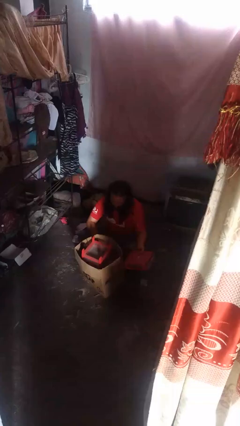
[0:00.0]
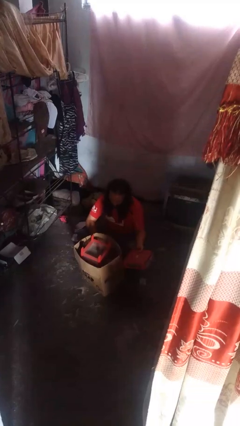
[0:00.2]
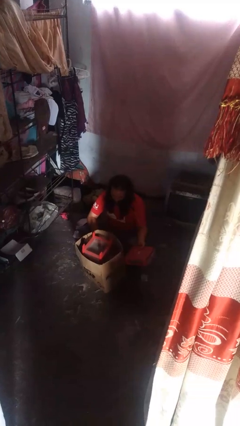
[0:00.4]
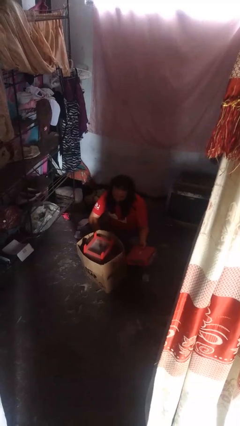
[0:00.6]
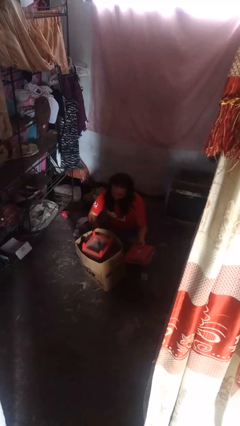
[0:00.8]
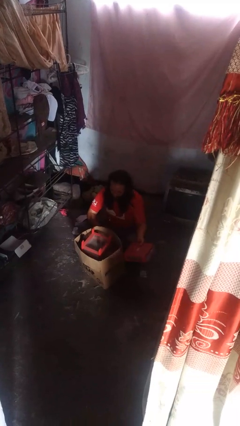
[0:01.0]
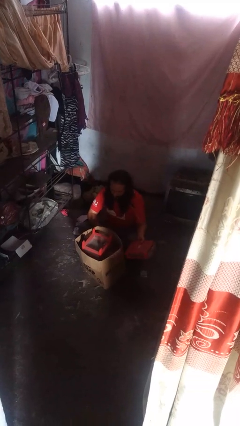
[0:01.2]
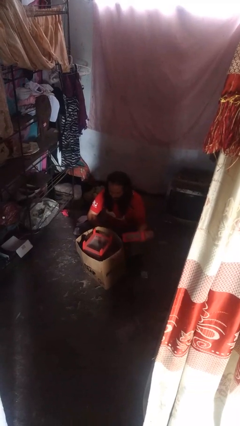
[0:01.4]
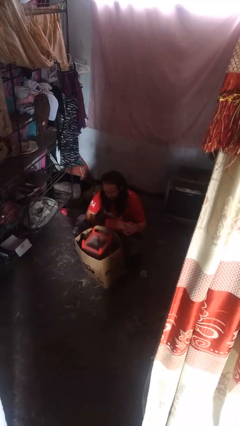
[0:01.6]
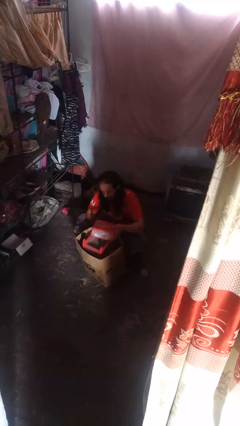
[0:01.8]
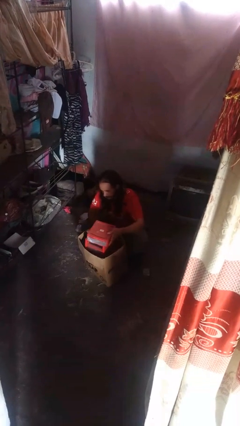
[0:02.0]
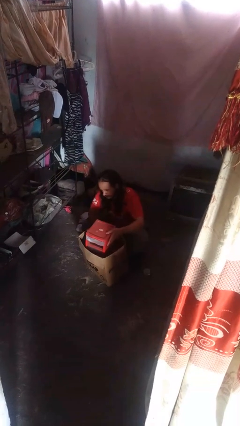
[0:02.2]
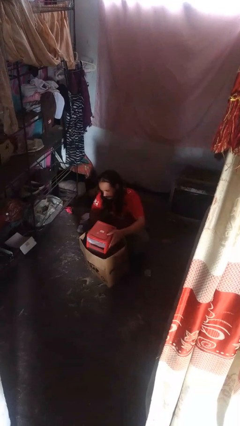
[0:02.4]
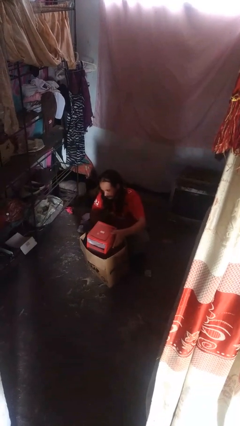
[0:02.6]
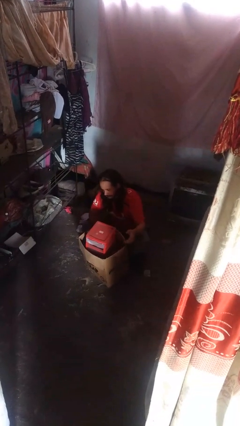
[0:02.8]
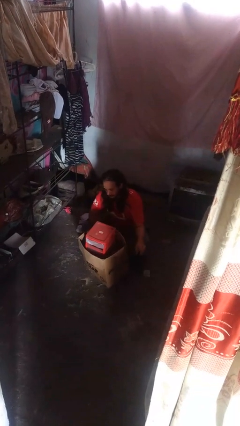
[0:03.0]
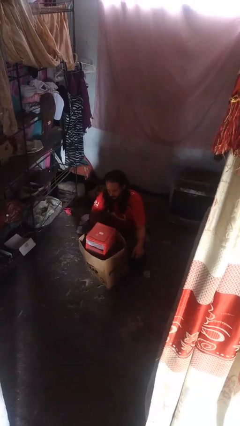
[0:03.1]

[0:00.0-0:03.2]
person puts object into box

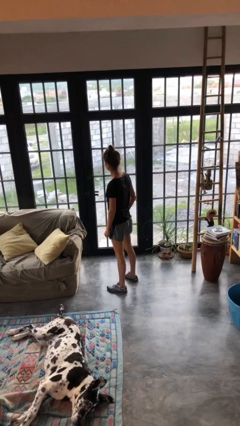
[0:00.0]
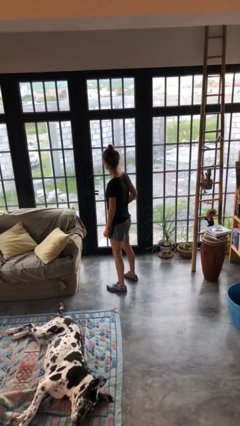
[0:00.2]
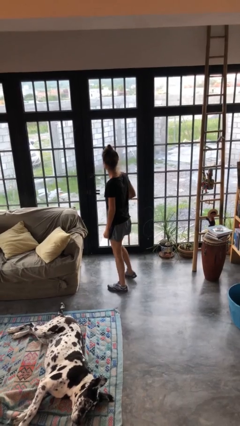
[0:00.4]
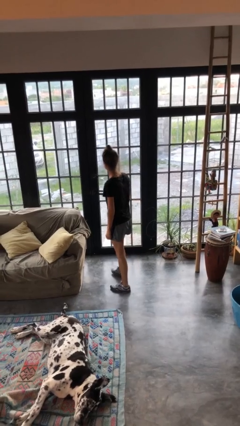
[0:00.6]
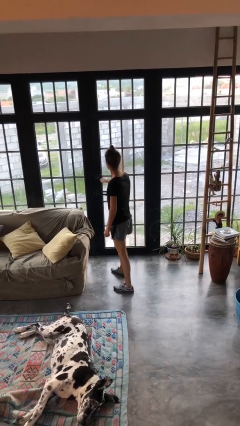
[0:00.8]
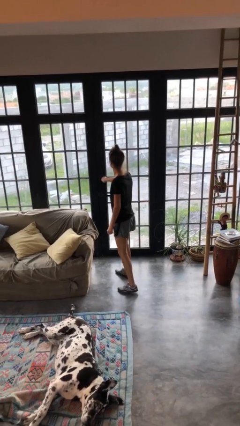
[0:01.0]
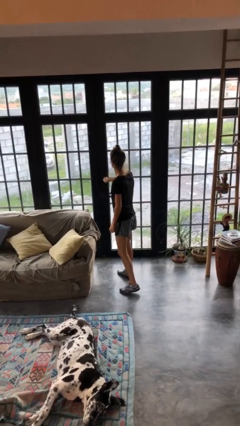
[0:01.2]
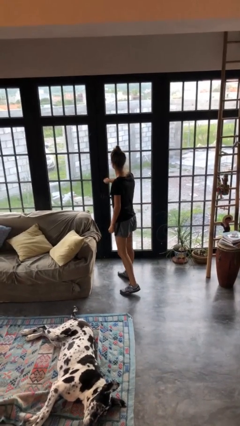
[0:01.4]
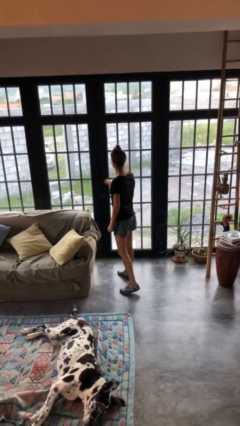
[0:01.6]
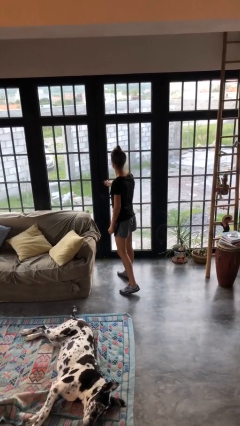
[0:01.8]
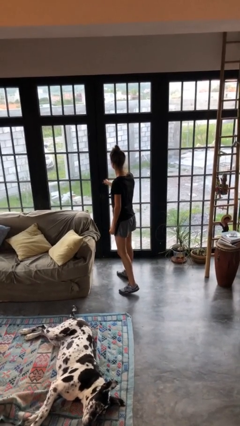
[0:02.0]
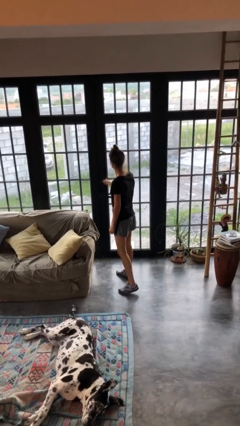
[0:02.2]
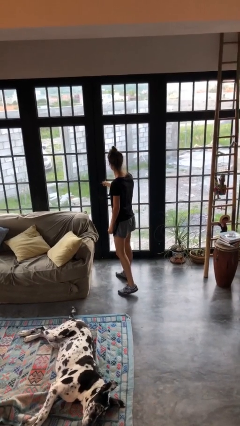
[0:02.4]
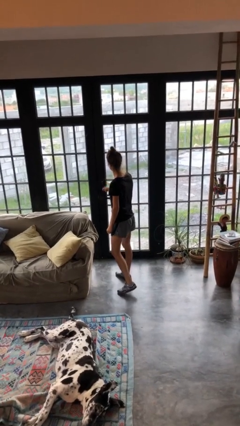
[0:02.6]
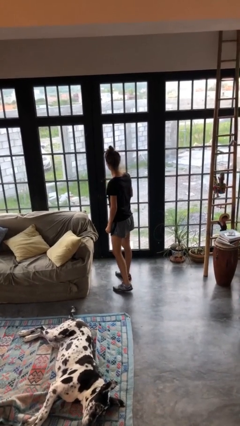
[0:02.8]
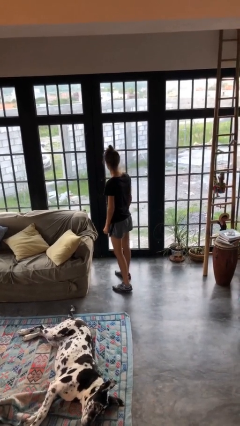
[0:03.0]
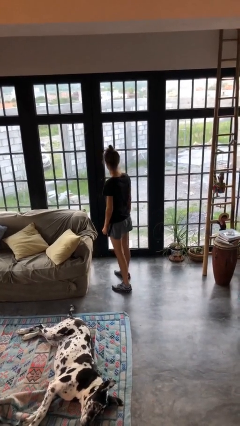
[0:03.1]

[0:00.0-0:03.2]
person unlocks door with keys

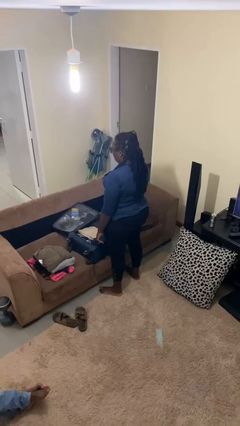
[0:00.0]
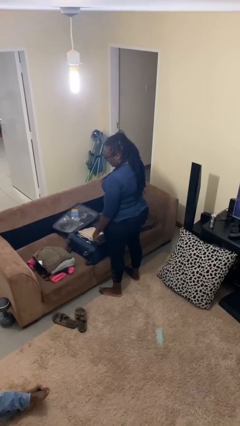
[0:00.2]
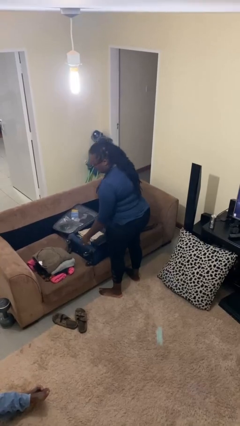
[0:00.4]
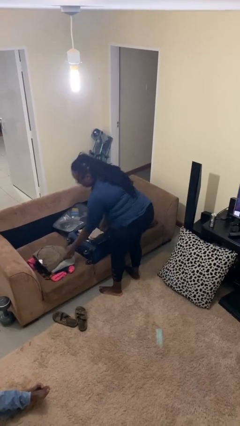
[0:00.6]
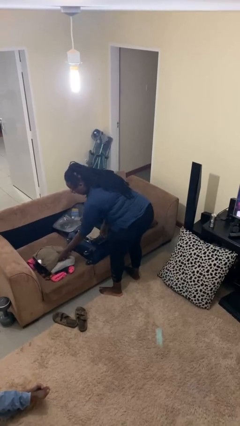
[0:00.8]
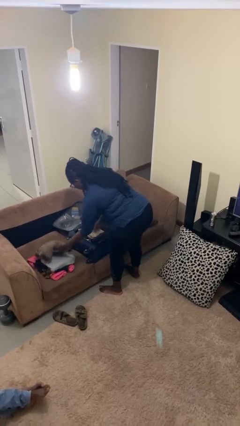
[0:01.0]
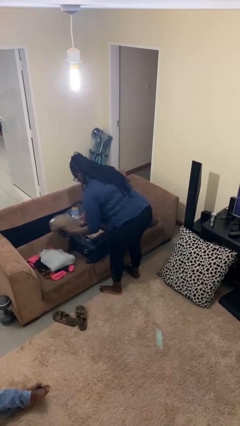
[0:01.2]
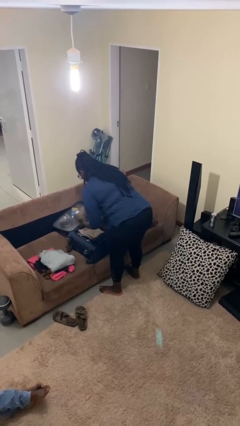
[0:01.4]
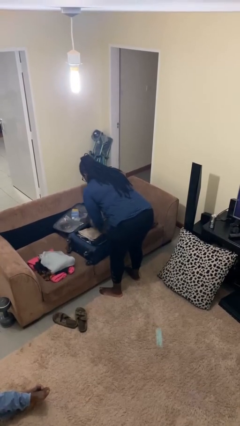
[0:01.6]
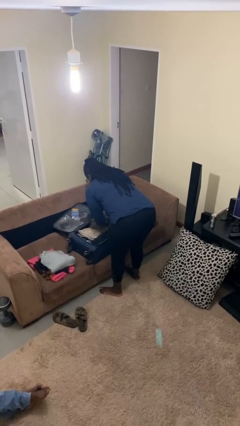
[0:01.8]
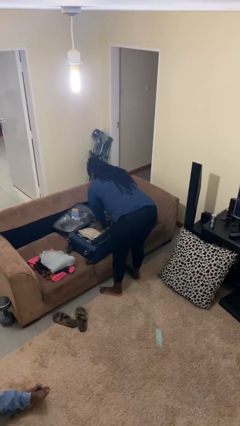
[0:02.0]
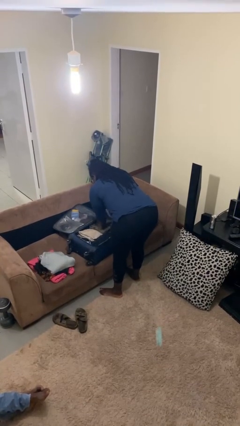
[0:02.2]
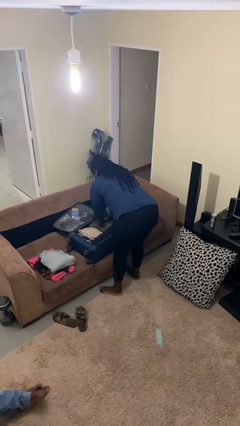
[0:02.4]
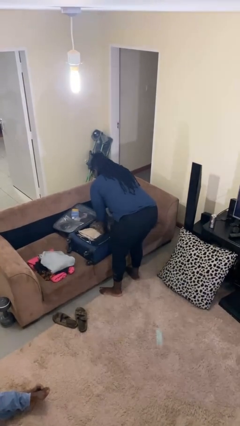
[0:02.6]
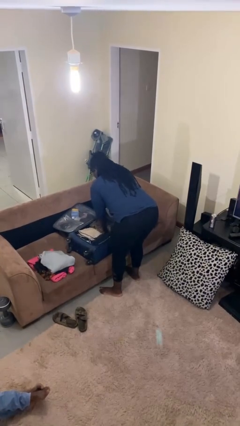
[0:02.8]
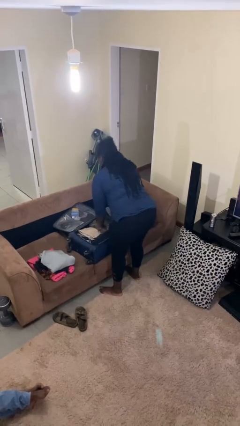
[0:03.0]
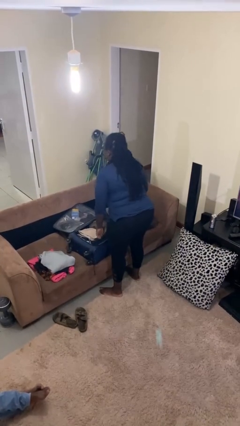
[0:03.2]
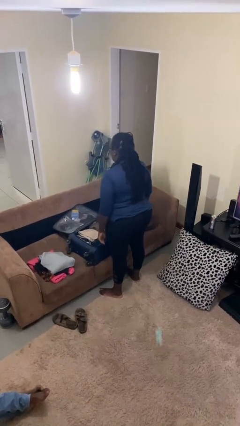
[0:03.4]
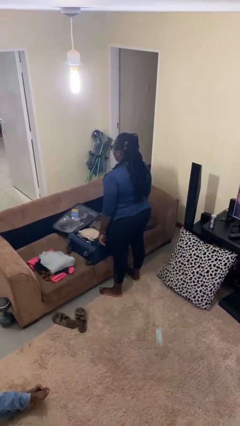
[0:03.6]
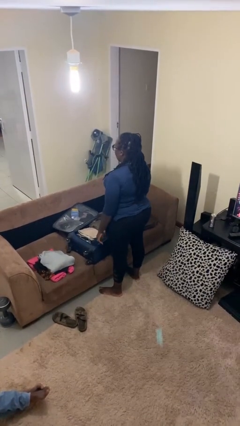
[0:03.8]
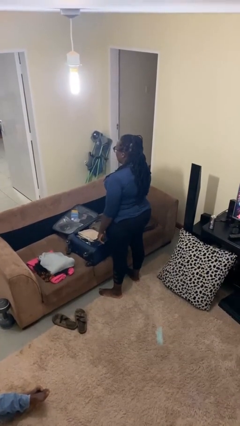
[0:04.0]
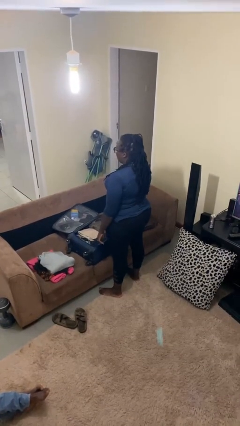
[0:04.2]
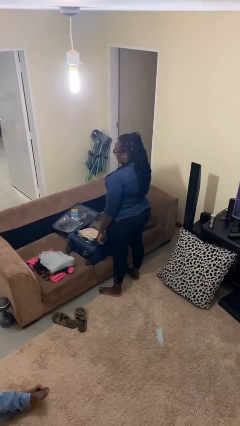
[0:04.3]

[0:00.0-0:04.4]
person loads clothes into suitcase

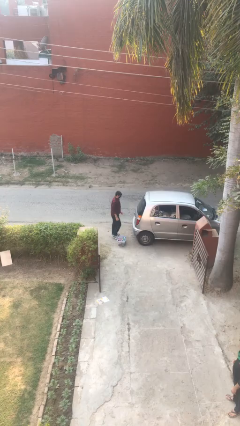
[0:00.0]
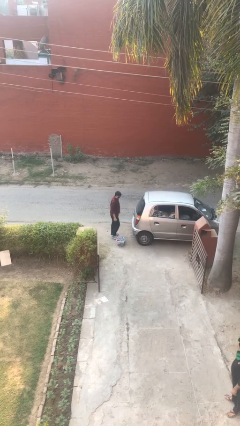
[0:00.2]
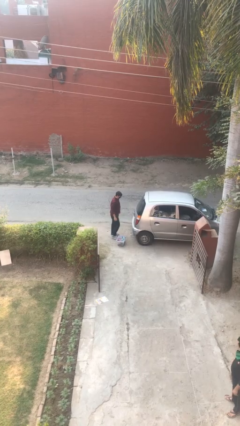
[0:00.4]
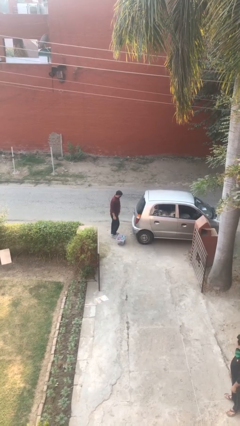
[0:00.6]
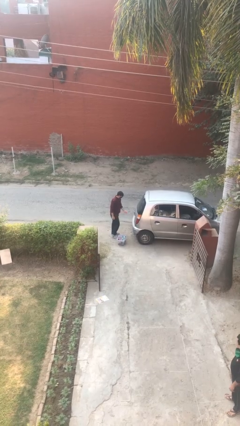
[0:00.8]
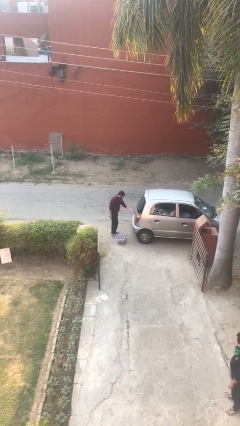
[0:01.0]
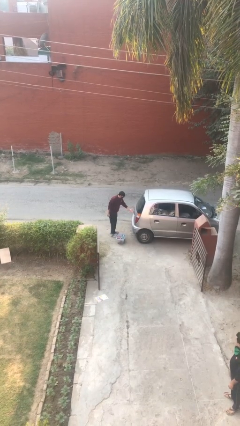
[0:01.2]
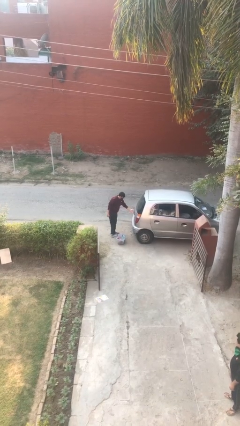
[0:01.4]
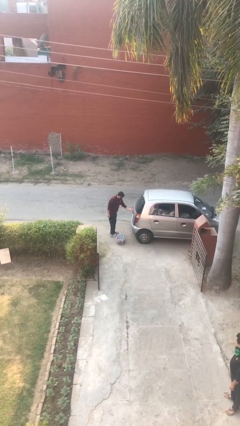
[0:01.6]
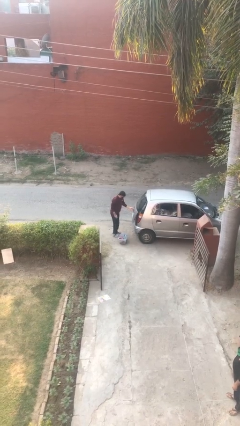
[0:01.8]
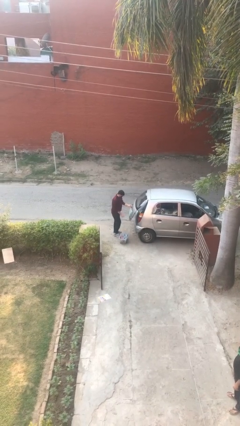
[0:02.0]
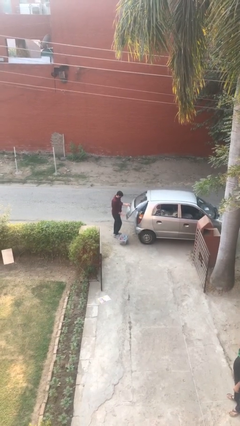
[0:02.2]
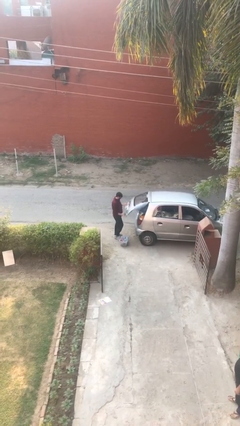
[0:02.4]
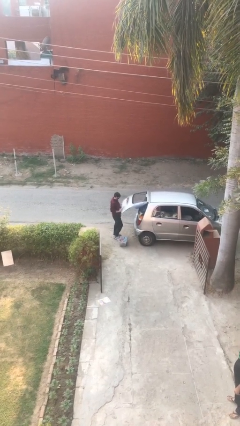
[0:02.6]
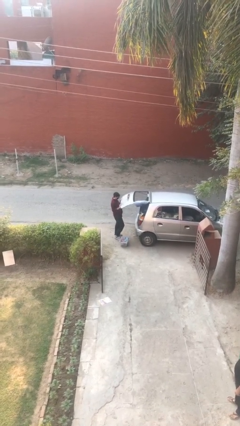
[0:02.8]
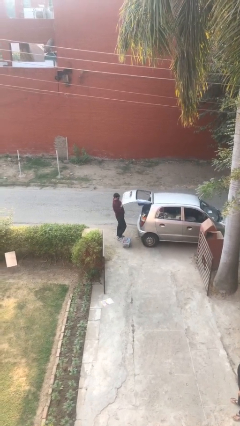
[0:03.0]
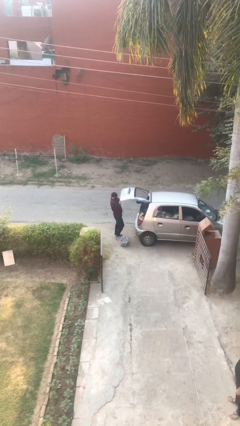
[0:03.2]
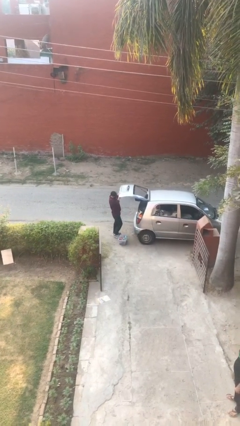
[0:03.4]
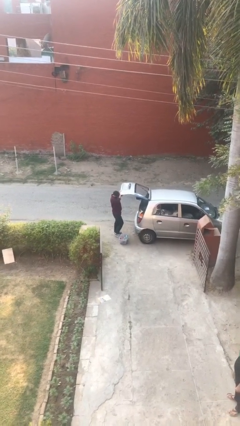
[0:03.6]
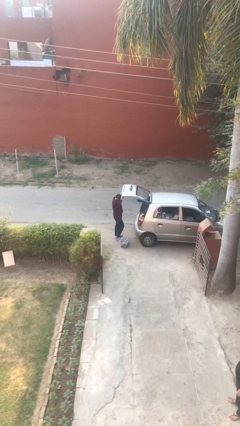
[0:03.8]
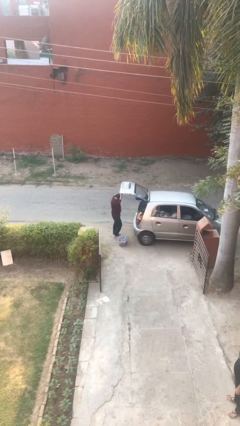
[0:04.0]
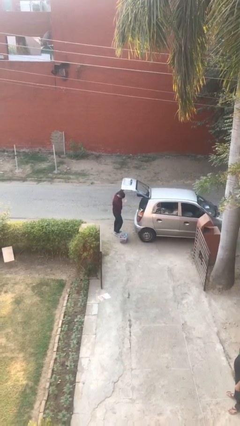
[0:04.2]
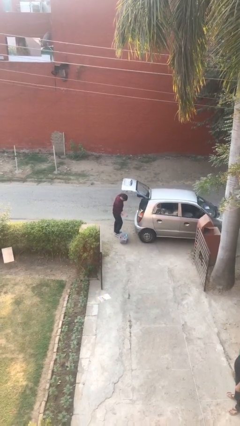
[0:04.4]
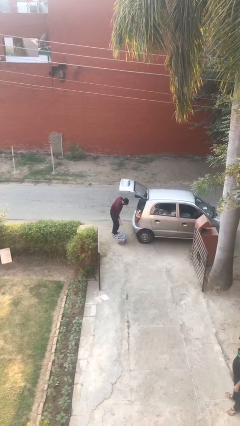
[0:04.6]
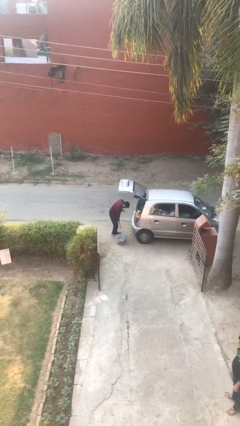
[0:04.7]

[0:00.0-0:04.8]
person opens car trunk

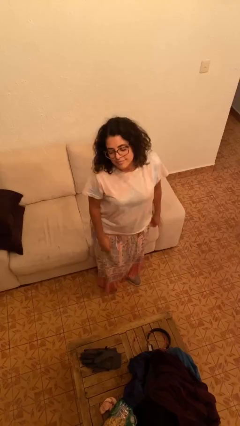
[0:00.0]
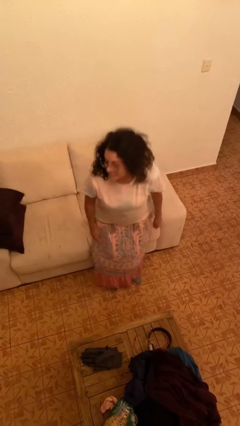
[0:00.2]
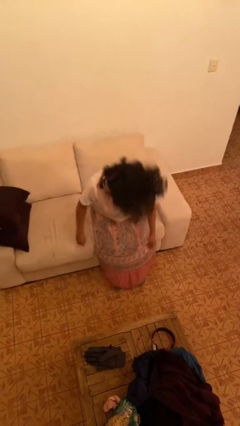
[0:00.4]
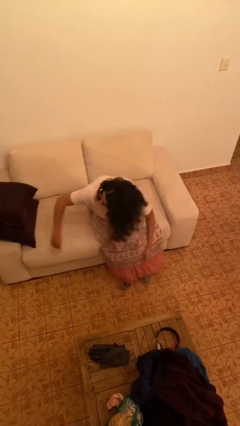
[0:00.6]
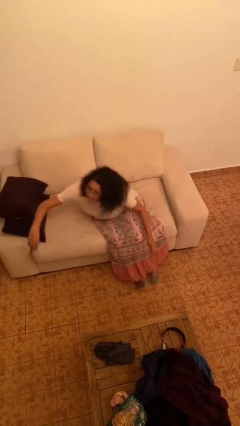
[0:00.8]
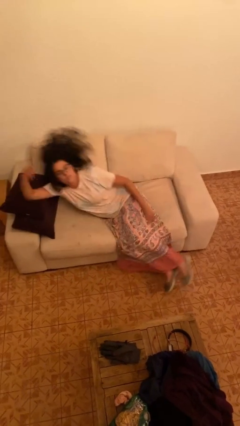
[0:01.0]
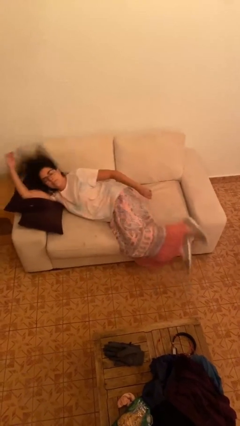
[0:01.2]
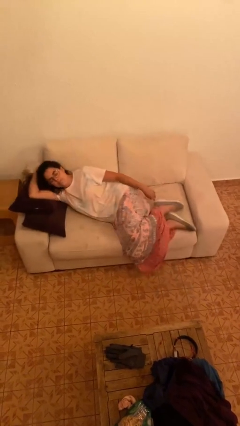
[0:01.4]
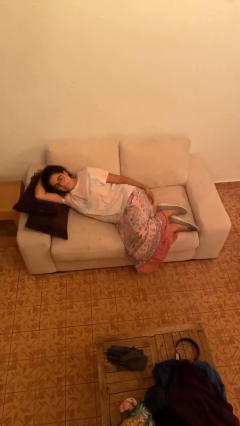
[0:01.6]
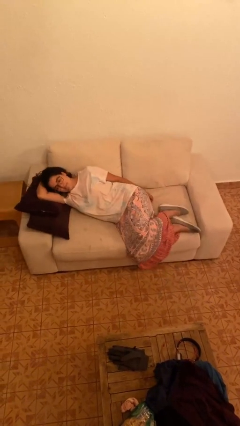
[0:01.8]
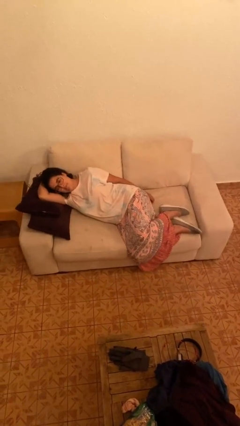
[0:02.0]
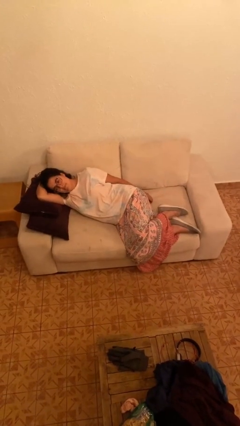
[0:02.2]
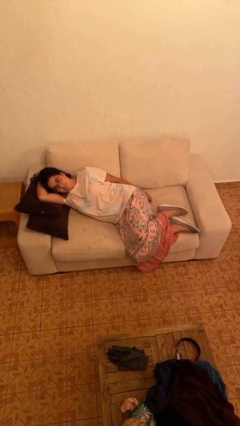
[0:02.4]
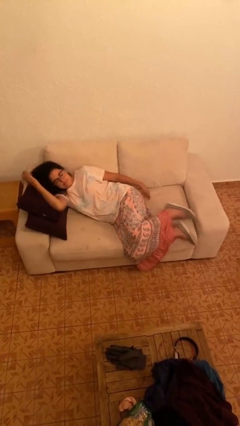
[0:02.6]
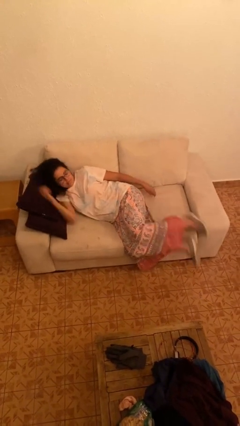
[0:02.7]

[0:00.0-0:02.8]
person lies down on couch
